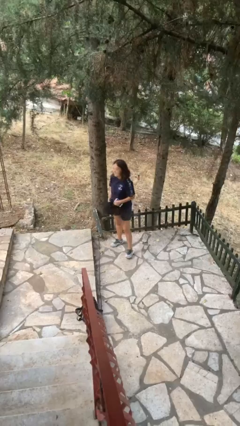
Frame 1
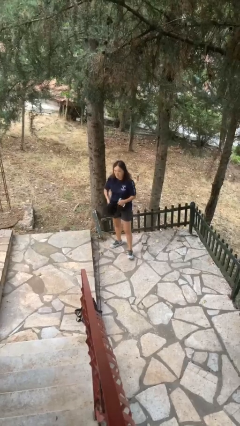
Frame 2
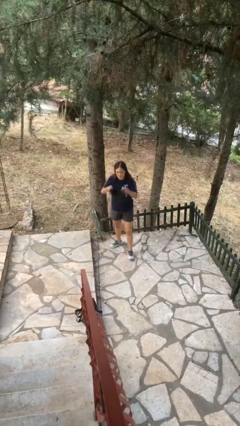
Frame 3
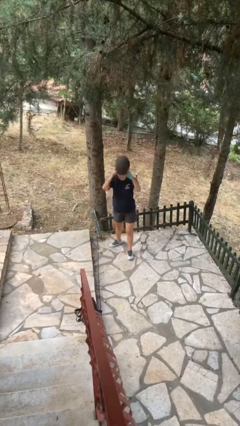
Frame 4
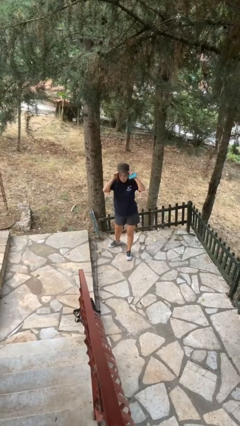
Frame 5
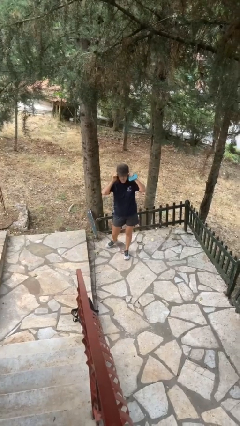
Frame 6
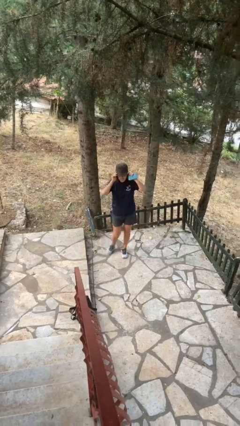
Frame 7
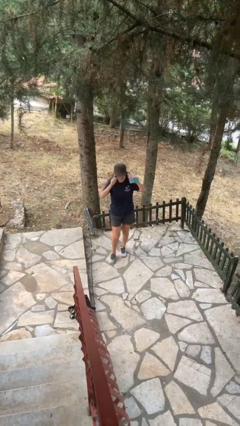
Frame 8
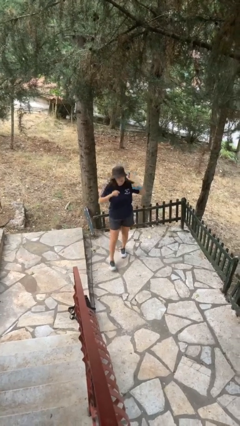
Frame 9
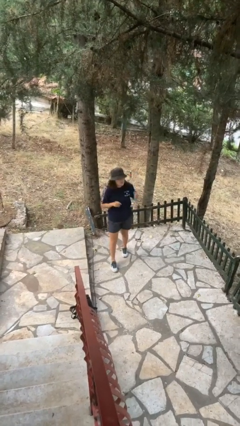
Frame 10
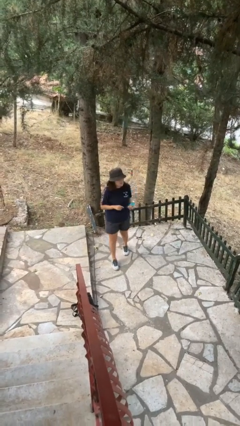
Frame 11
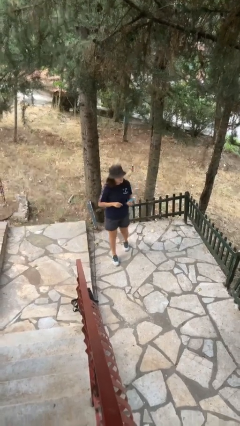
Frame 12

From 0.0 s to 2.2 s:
person puts on hat

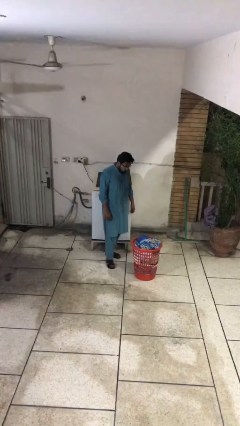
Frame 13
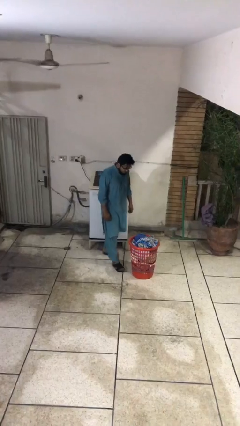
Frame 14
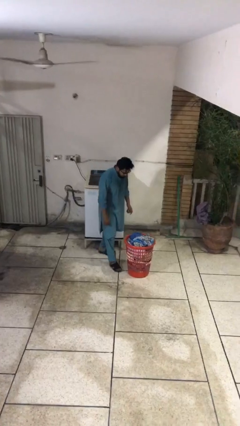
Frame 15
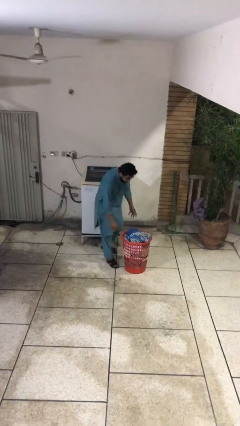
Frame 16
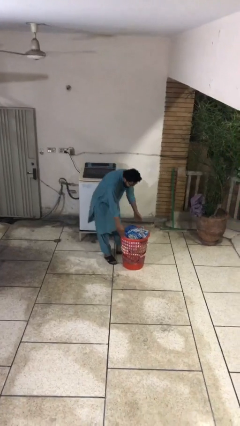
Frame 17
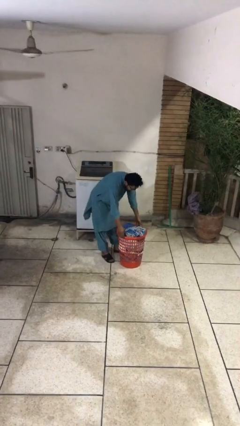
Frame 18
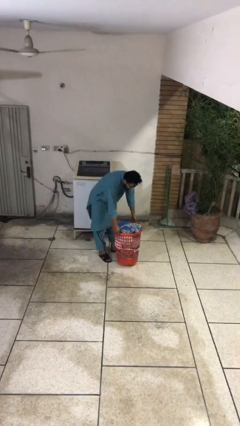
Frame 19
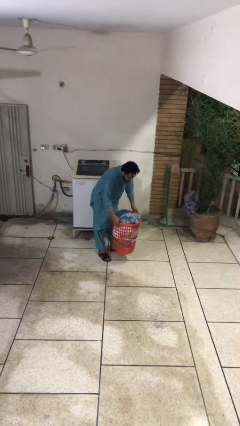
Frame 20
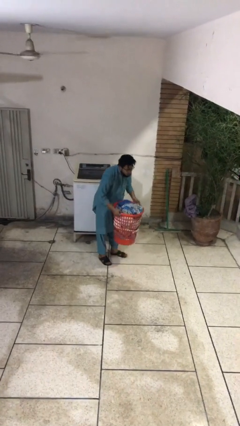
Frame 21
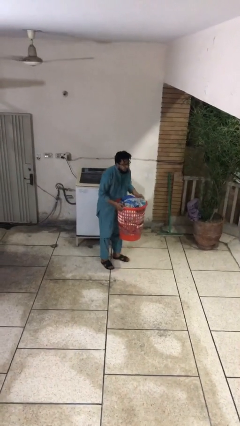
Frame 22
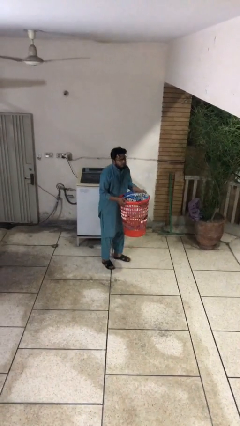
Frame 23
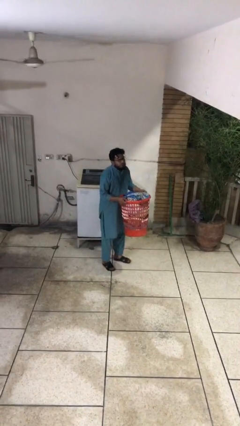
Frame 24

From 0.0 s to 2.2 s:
person picks up object from floor

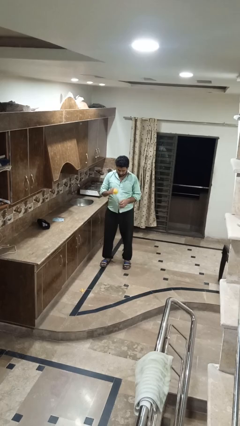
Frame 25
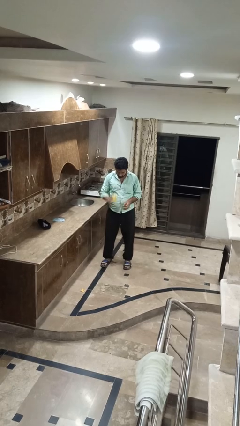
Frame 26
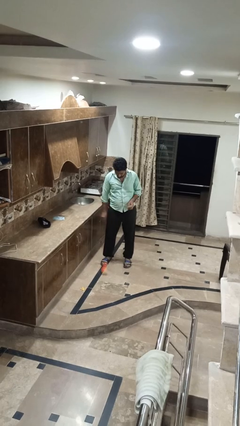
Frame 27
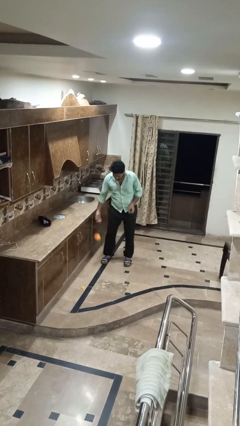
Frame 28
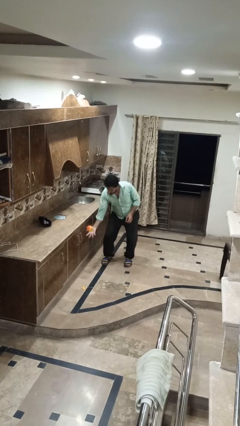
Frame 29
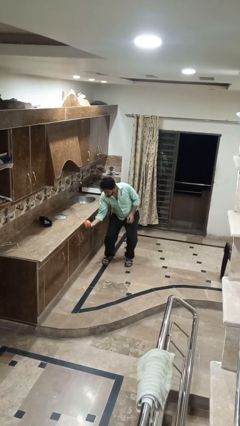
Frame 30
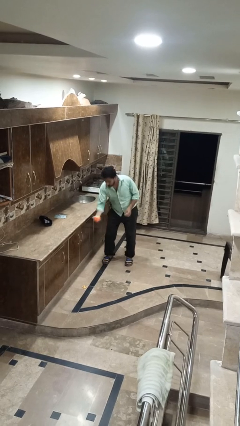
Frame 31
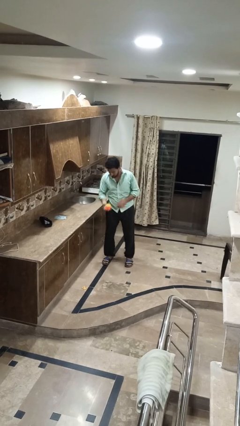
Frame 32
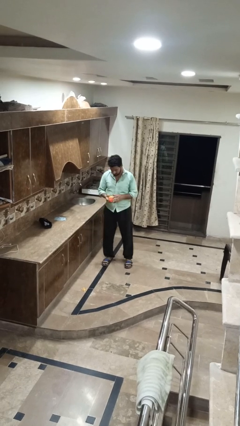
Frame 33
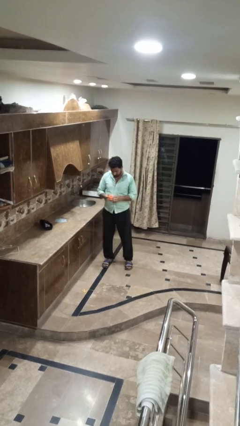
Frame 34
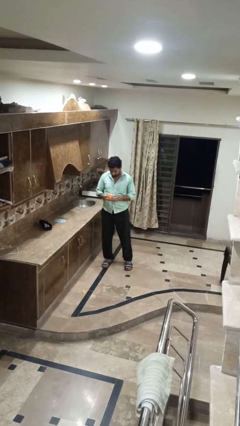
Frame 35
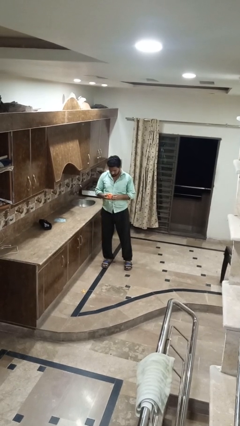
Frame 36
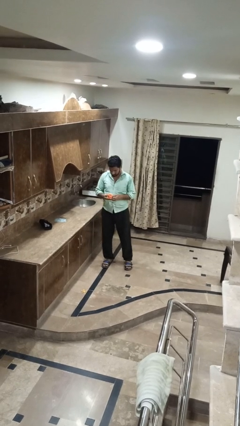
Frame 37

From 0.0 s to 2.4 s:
person bounces ball on floor

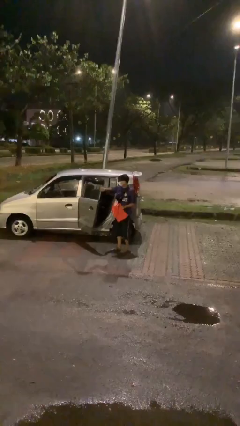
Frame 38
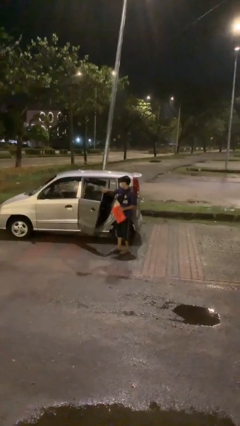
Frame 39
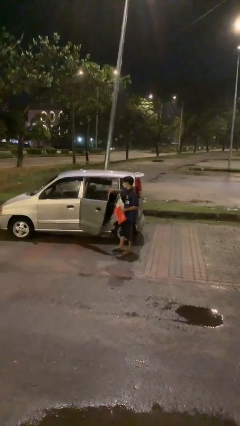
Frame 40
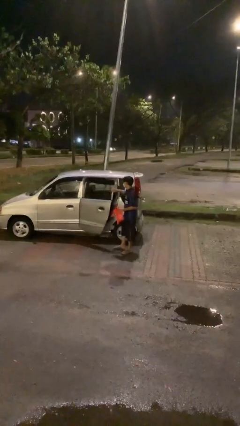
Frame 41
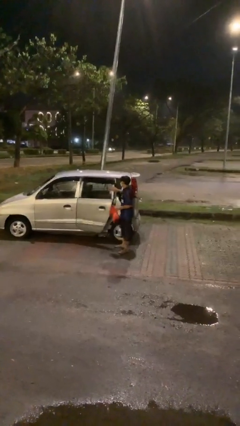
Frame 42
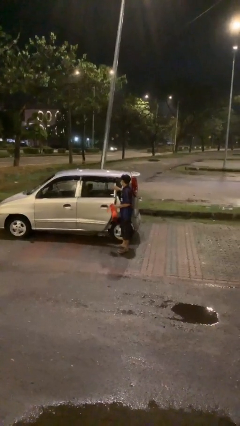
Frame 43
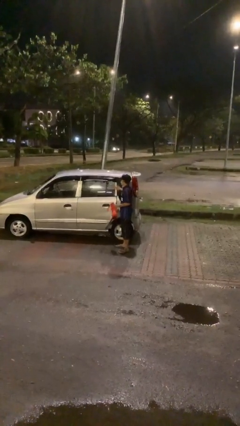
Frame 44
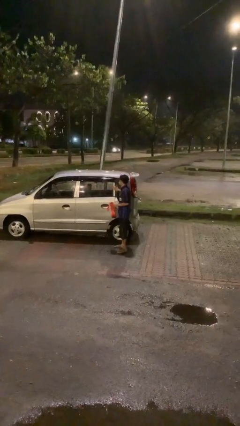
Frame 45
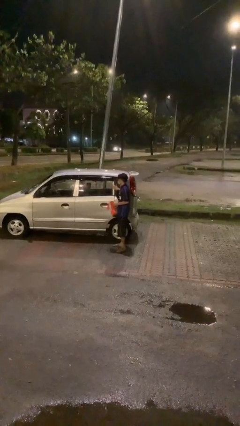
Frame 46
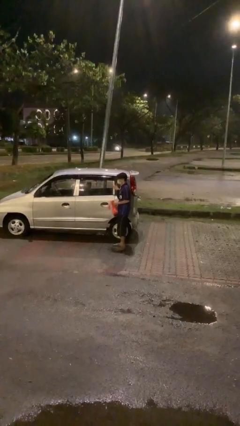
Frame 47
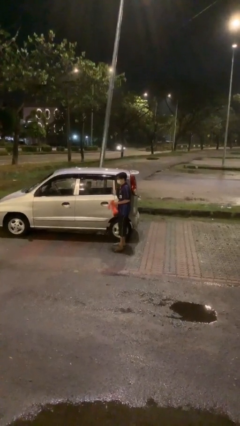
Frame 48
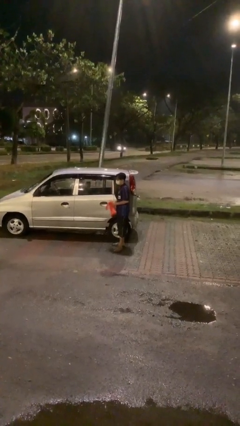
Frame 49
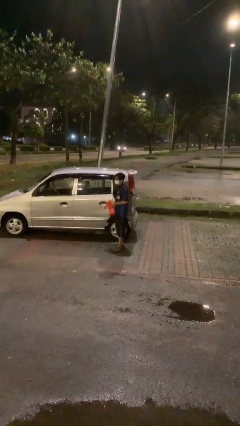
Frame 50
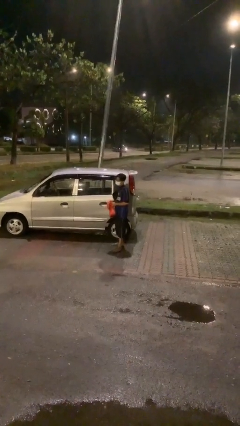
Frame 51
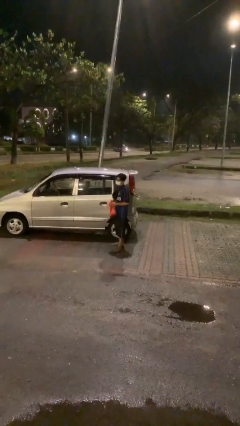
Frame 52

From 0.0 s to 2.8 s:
person closes car door

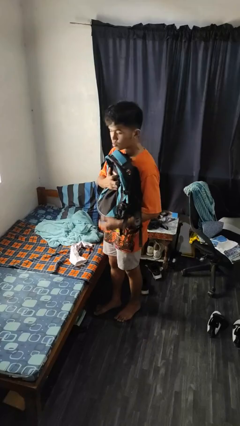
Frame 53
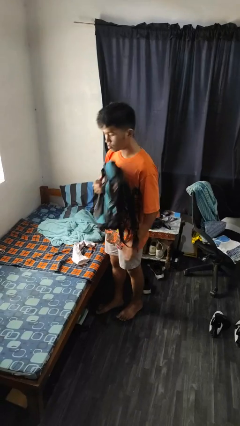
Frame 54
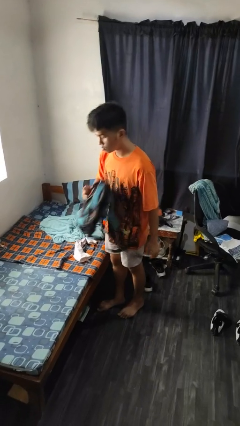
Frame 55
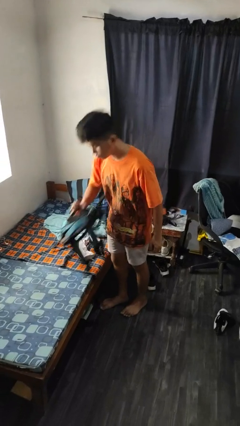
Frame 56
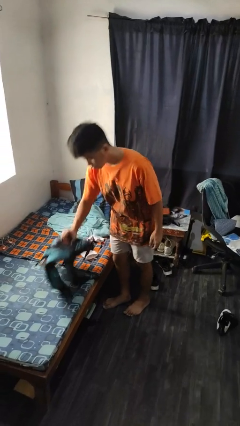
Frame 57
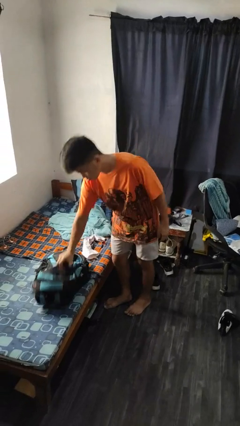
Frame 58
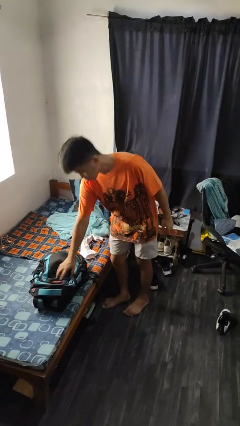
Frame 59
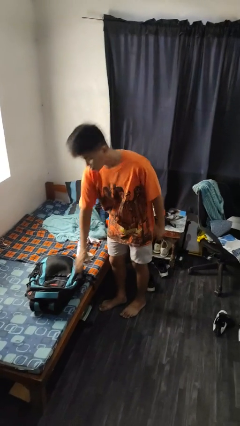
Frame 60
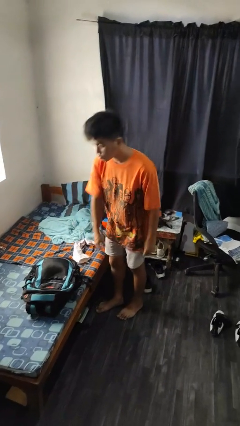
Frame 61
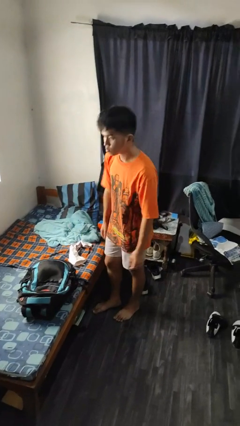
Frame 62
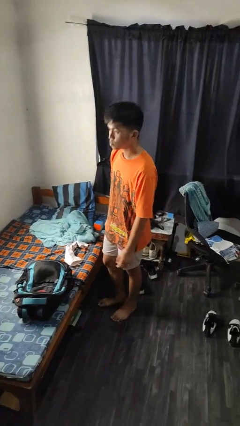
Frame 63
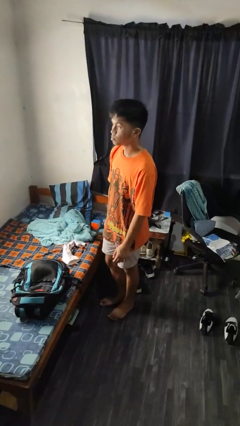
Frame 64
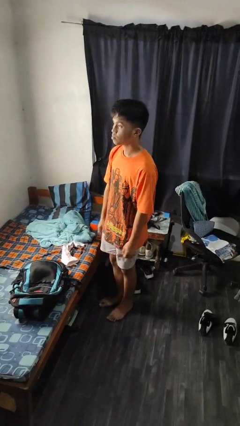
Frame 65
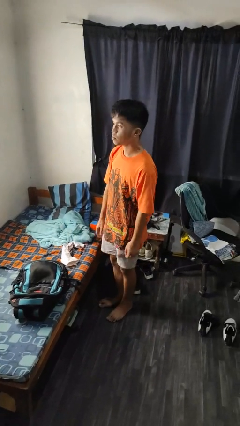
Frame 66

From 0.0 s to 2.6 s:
person puts down object on bed

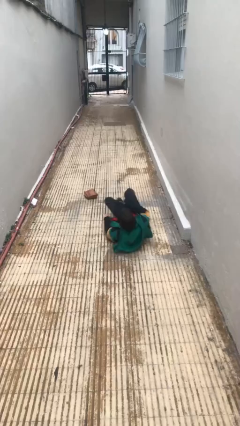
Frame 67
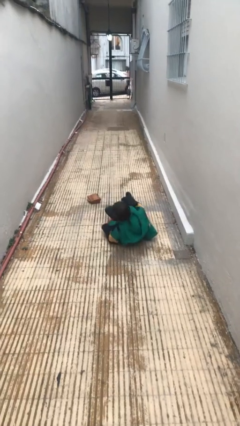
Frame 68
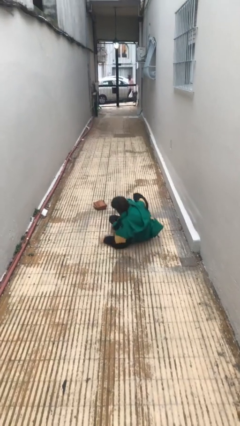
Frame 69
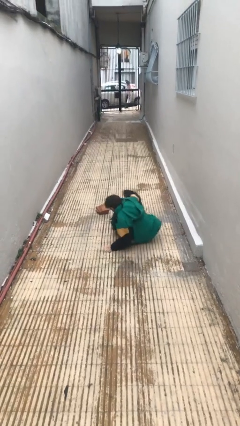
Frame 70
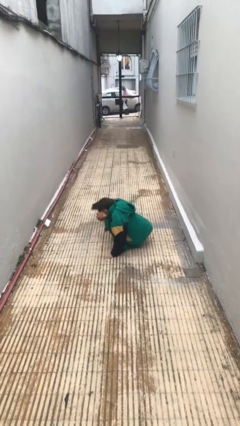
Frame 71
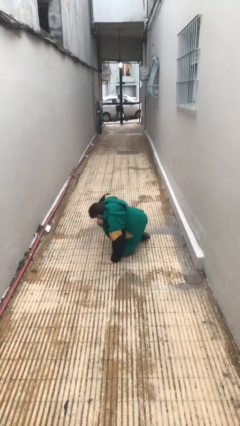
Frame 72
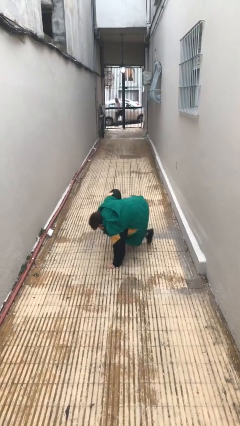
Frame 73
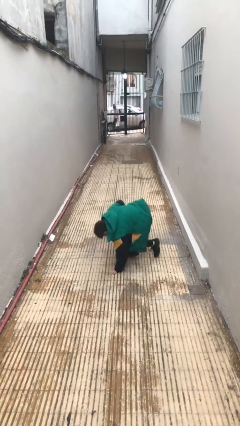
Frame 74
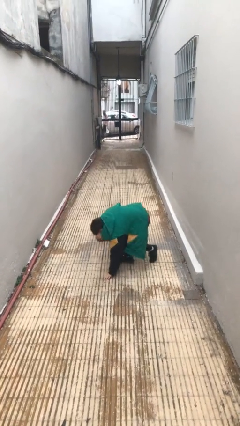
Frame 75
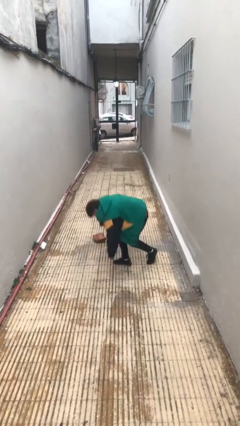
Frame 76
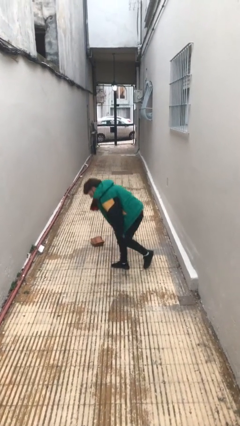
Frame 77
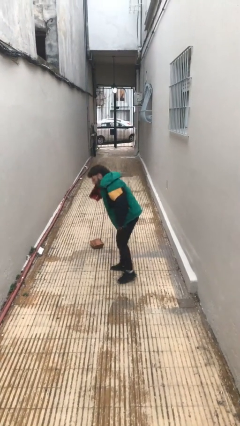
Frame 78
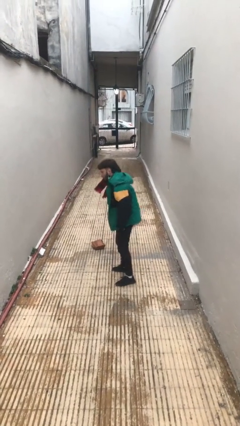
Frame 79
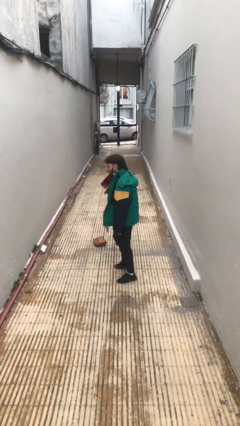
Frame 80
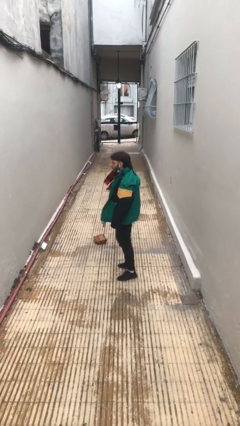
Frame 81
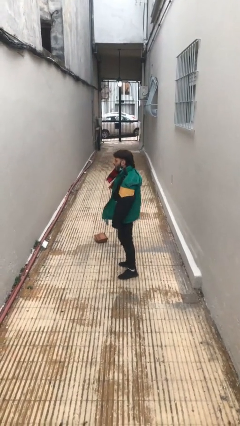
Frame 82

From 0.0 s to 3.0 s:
person stands up from floor

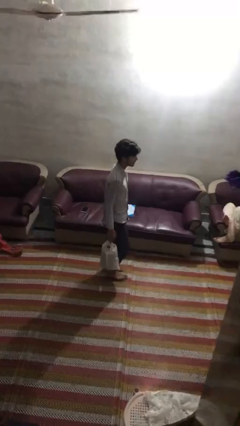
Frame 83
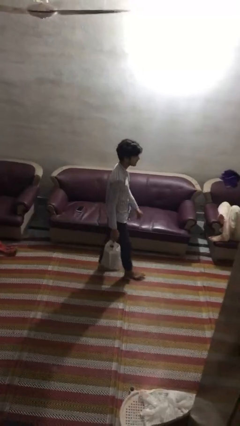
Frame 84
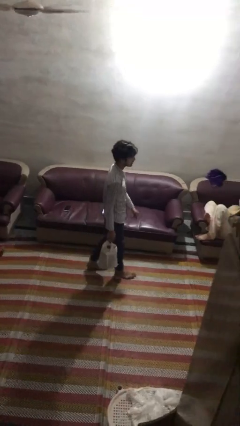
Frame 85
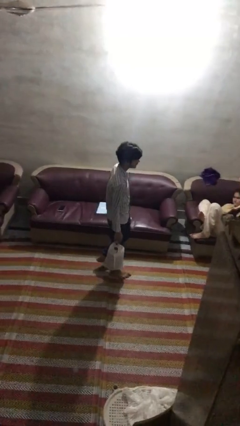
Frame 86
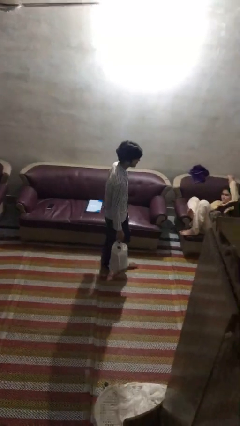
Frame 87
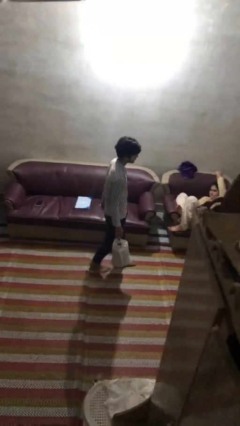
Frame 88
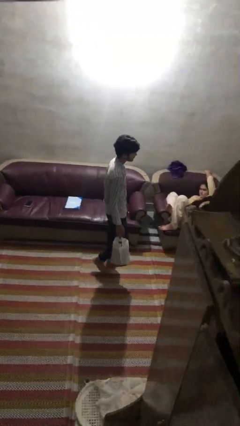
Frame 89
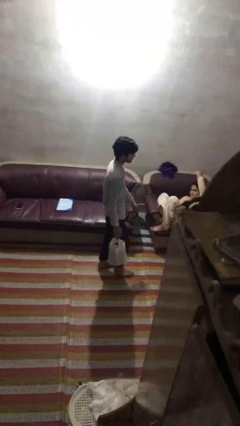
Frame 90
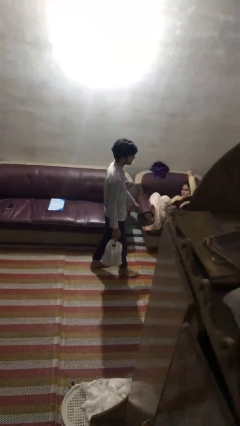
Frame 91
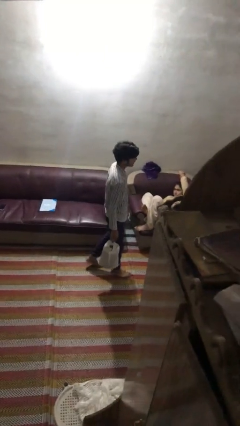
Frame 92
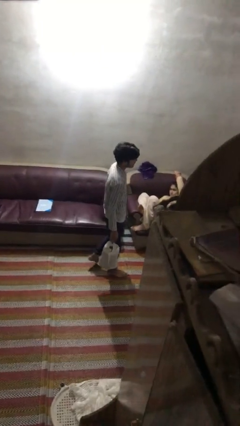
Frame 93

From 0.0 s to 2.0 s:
person carries groceries
